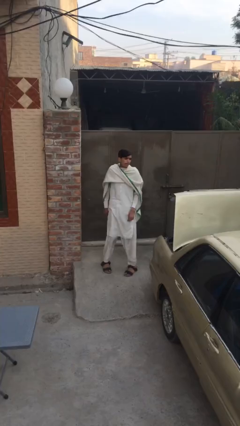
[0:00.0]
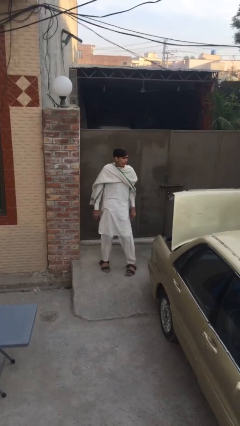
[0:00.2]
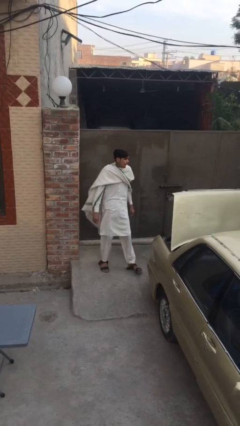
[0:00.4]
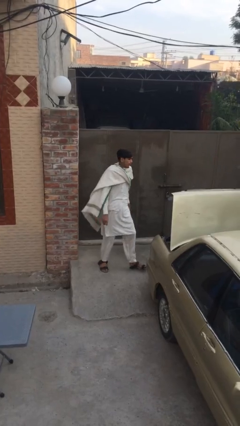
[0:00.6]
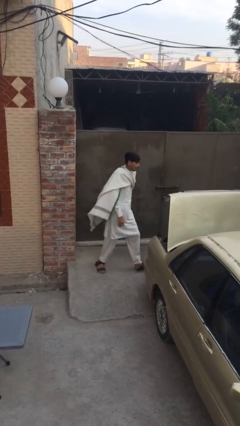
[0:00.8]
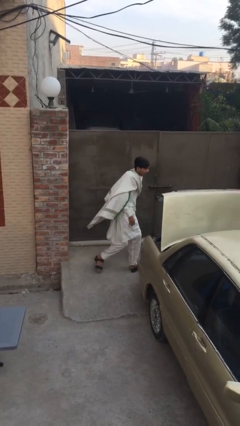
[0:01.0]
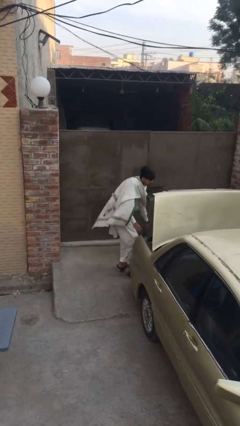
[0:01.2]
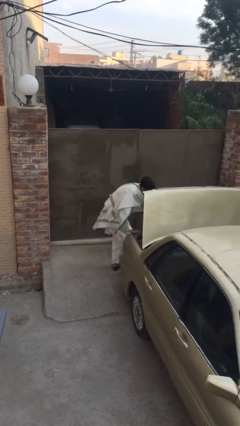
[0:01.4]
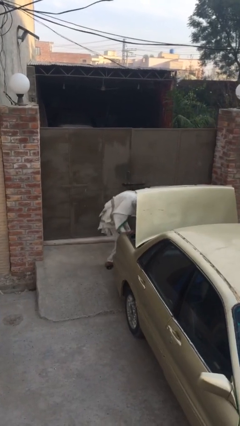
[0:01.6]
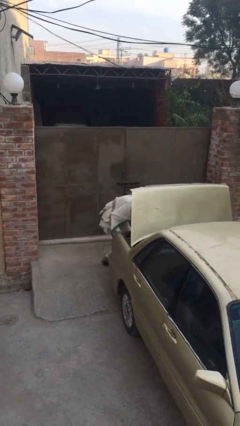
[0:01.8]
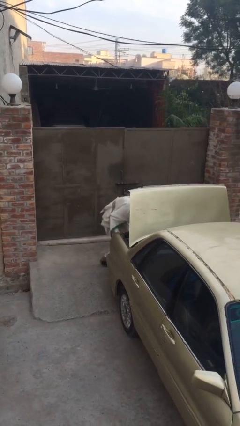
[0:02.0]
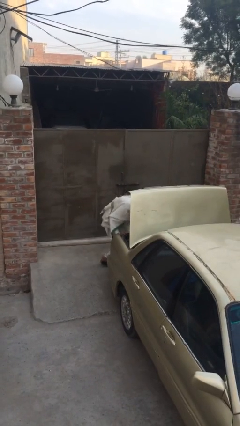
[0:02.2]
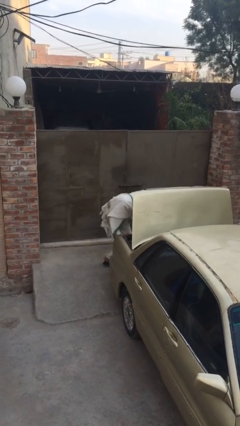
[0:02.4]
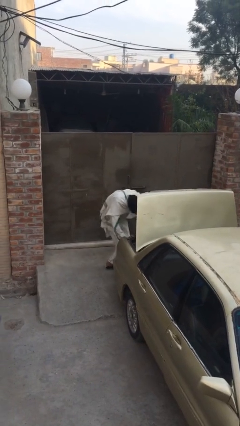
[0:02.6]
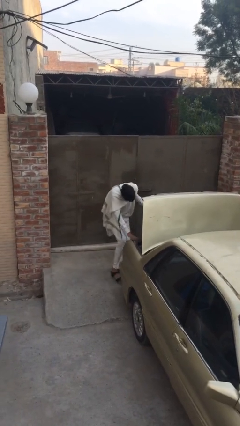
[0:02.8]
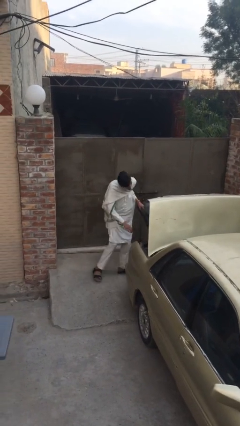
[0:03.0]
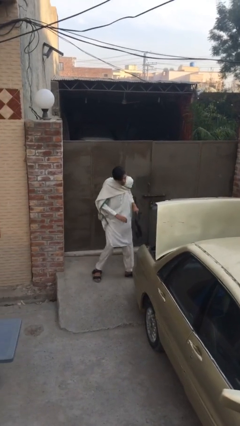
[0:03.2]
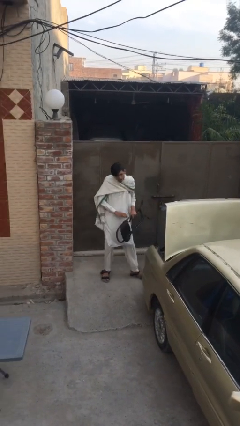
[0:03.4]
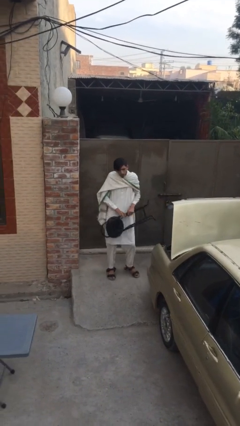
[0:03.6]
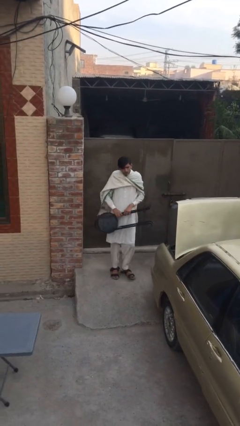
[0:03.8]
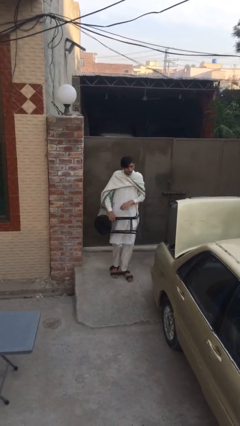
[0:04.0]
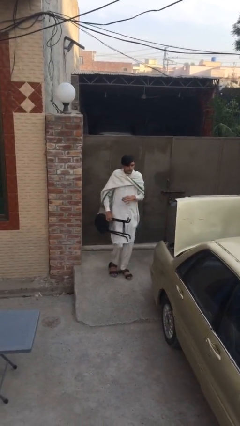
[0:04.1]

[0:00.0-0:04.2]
person unloads car

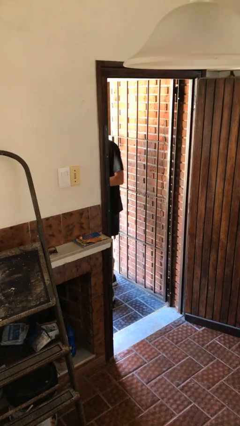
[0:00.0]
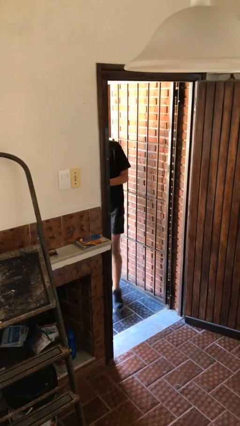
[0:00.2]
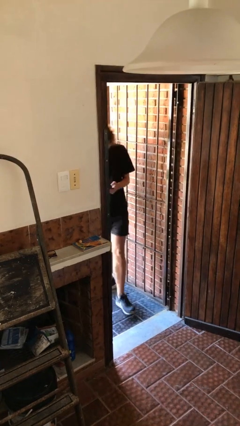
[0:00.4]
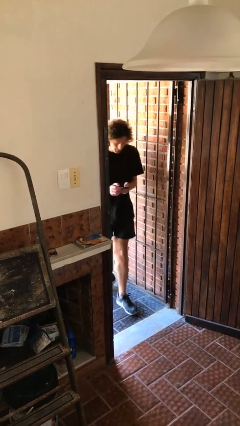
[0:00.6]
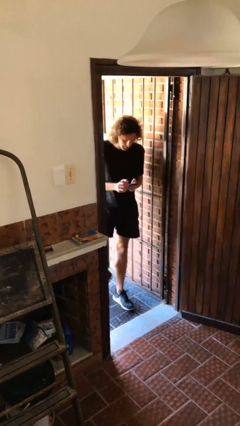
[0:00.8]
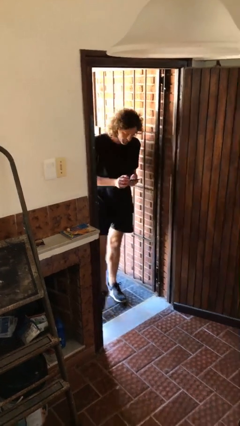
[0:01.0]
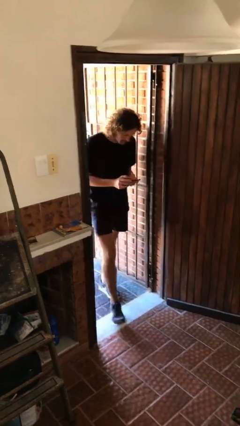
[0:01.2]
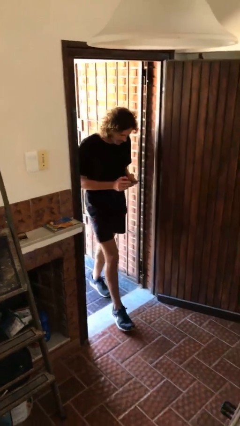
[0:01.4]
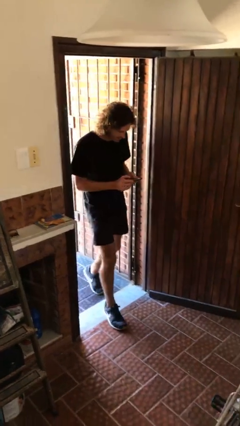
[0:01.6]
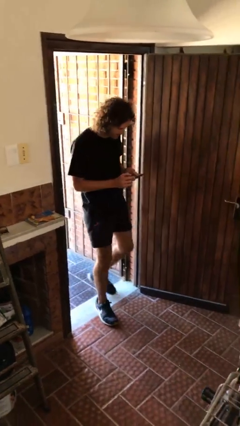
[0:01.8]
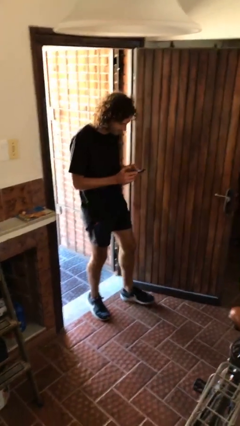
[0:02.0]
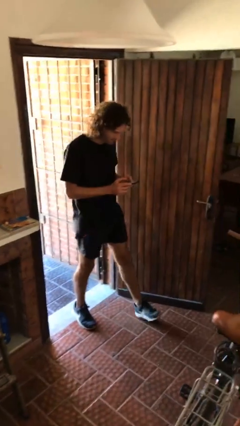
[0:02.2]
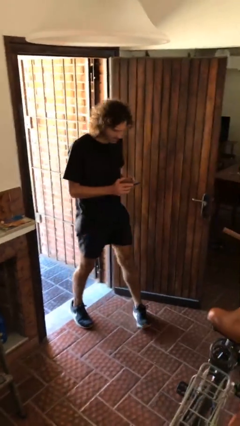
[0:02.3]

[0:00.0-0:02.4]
person enters scene through structure

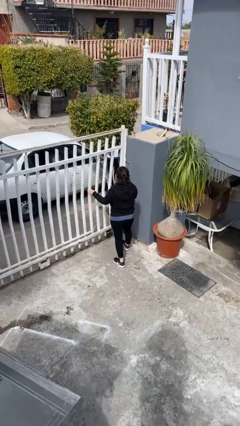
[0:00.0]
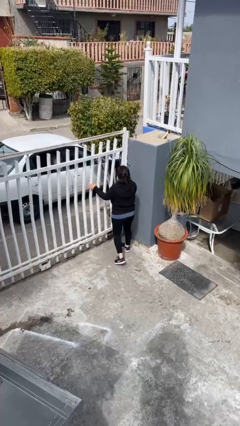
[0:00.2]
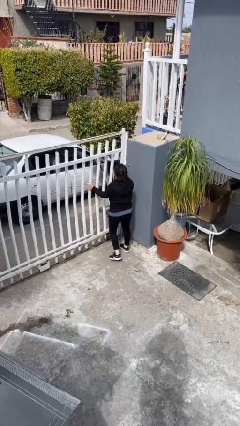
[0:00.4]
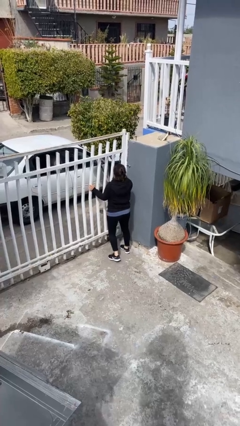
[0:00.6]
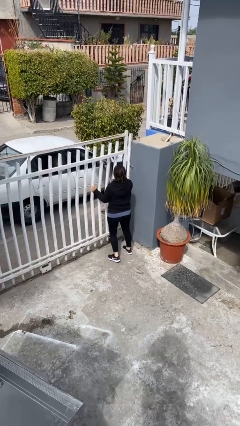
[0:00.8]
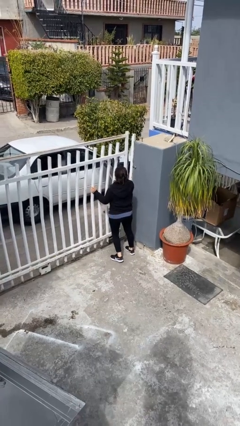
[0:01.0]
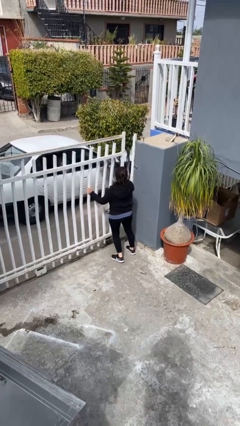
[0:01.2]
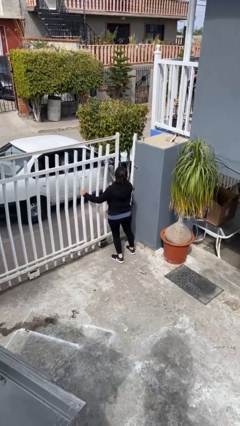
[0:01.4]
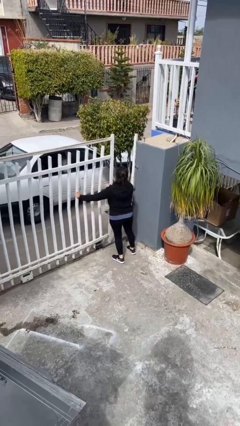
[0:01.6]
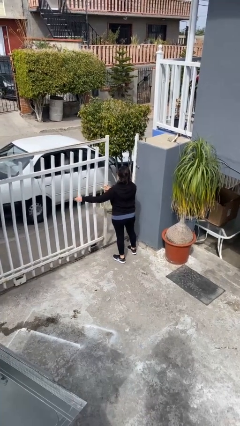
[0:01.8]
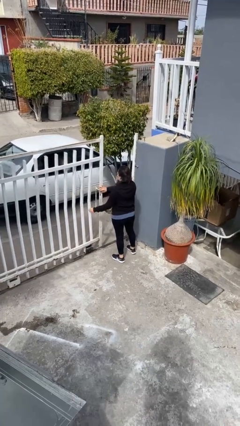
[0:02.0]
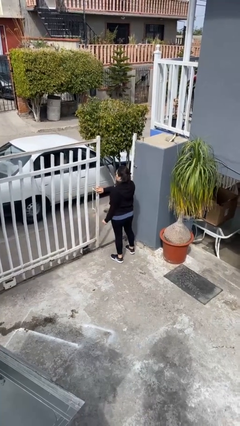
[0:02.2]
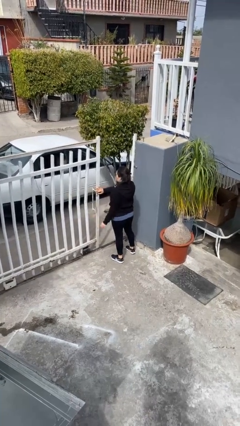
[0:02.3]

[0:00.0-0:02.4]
person opens facility door

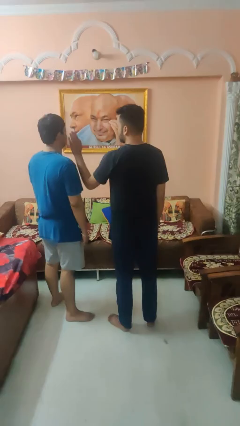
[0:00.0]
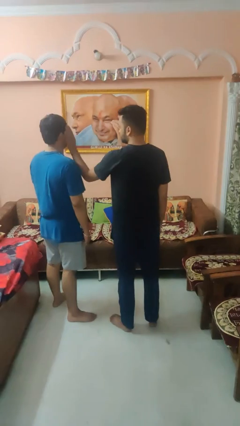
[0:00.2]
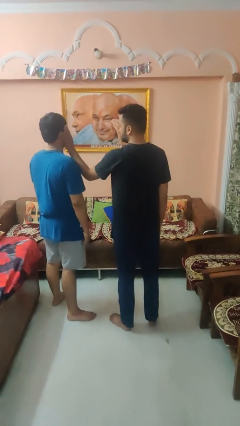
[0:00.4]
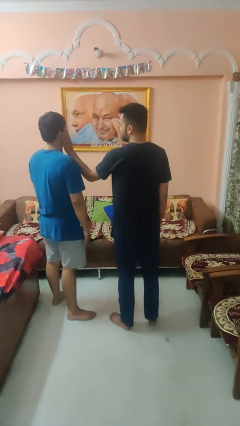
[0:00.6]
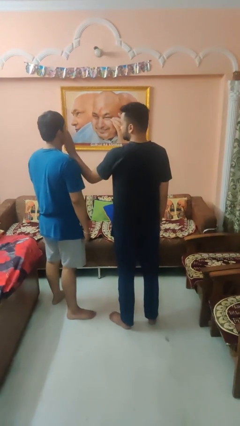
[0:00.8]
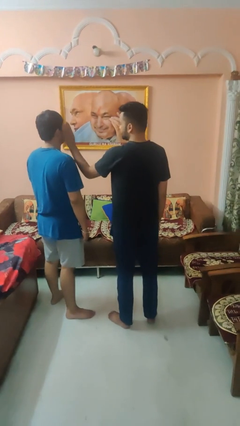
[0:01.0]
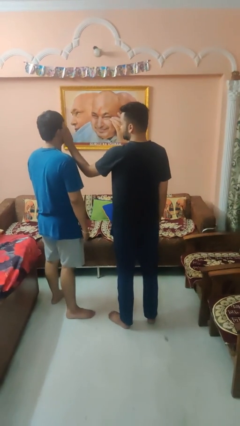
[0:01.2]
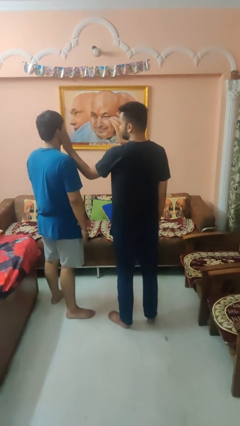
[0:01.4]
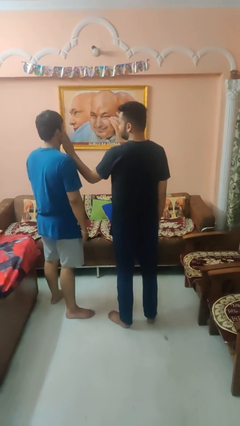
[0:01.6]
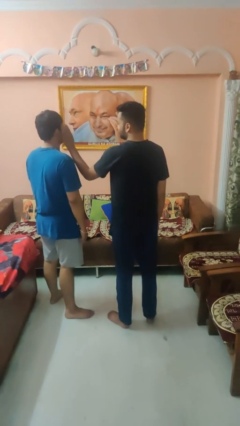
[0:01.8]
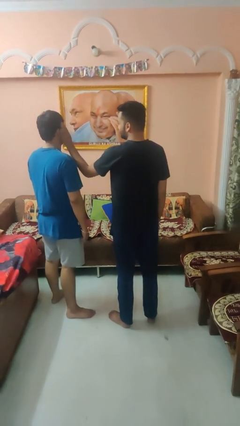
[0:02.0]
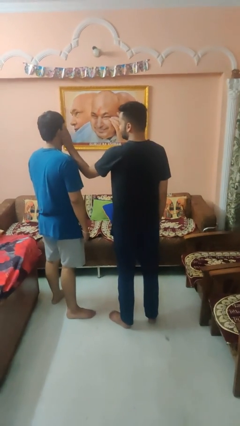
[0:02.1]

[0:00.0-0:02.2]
person touches face of person

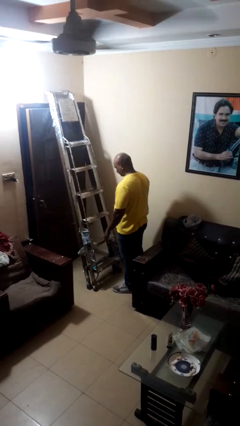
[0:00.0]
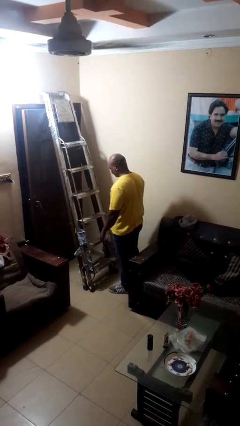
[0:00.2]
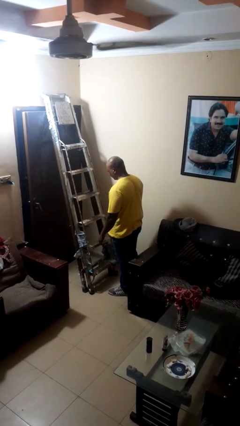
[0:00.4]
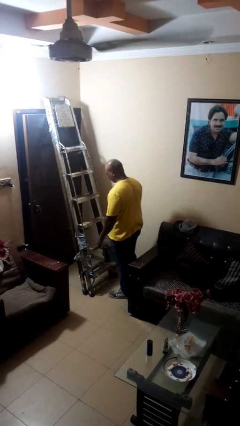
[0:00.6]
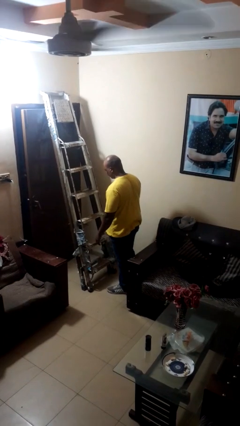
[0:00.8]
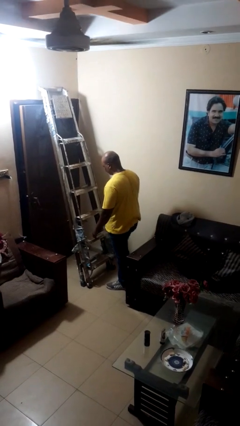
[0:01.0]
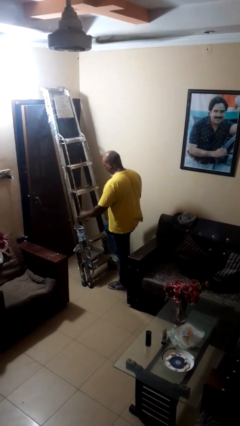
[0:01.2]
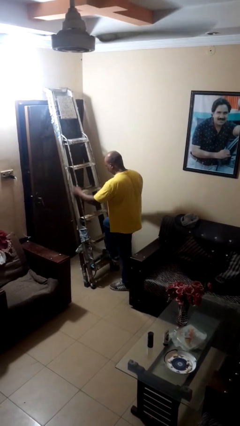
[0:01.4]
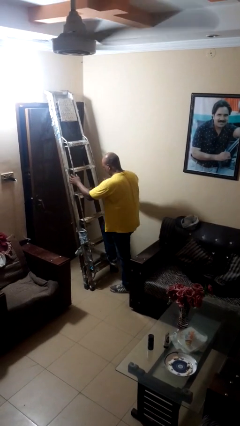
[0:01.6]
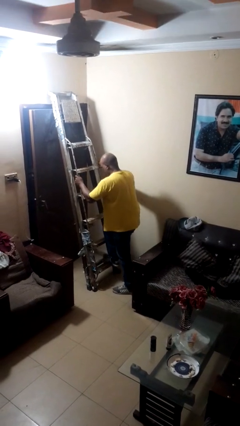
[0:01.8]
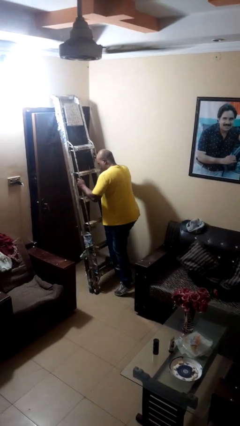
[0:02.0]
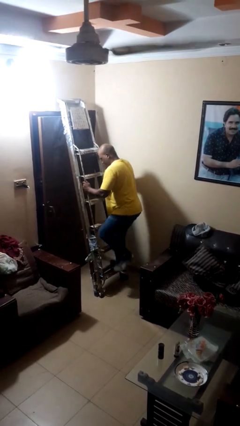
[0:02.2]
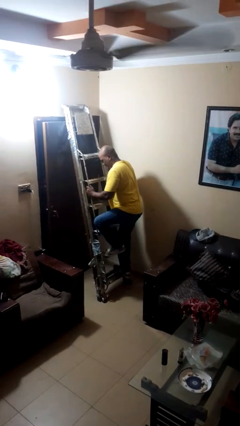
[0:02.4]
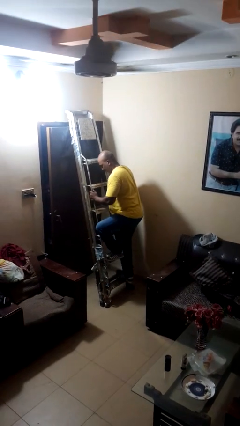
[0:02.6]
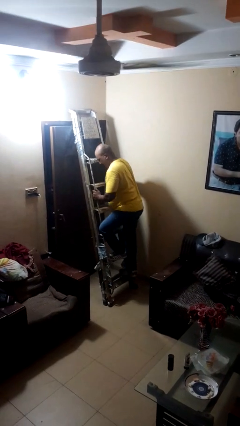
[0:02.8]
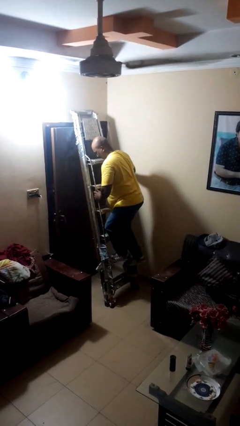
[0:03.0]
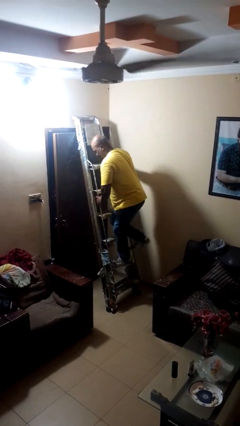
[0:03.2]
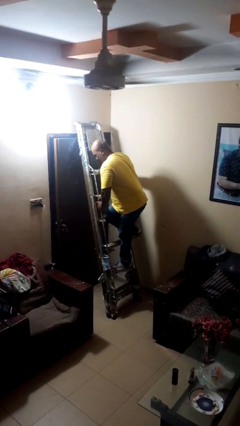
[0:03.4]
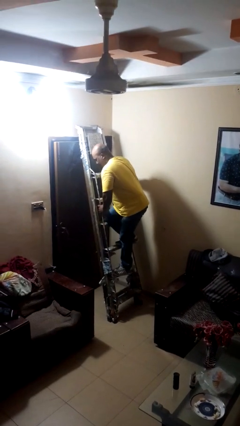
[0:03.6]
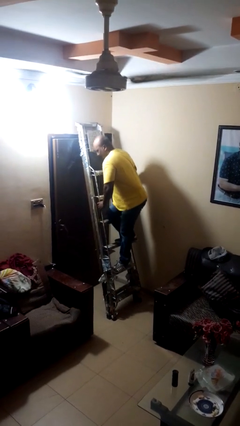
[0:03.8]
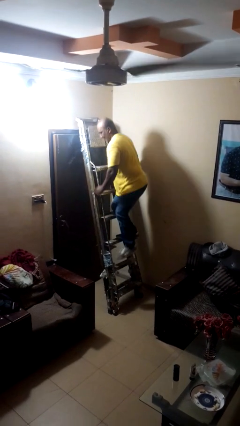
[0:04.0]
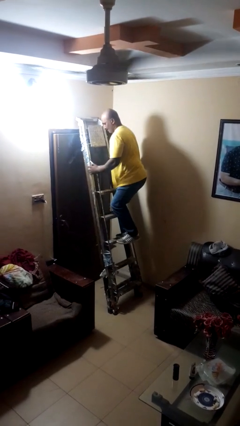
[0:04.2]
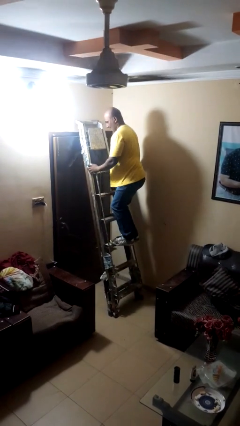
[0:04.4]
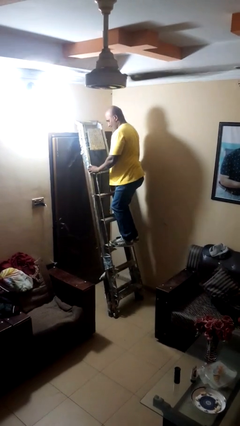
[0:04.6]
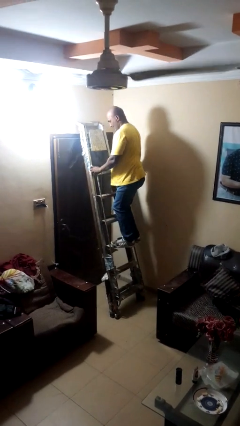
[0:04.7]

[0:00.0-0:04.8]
person climbs up stairs

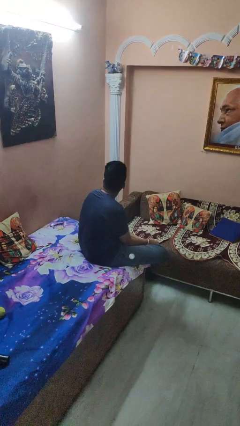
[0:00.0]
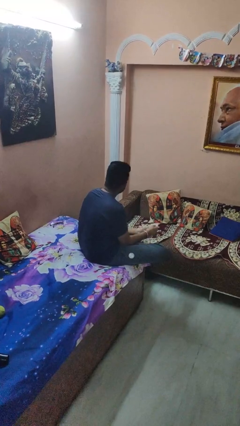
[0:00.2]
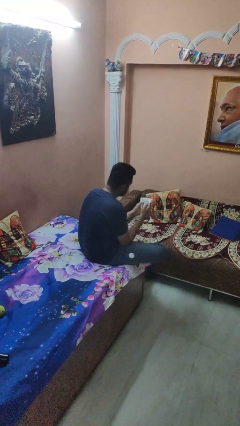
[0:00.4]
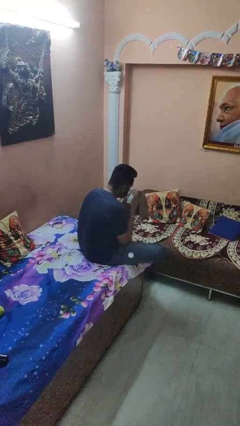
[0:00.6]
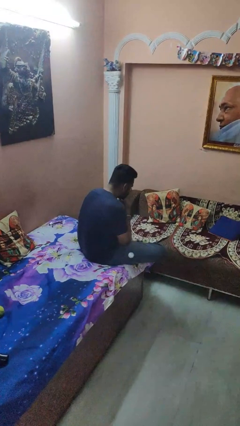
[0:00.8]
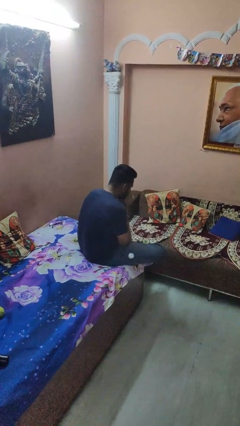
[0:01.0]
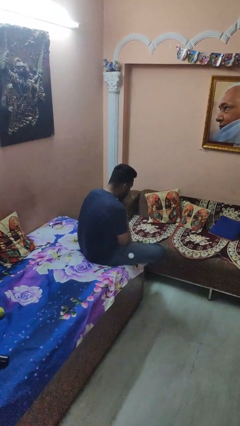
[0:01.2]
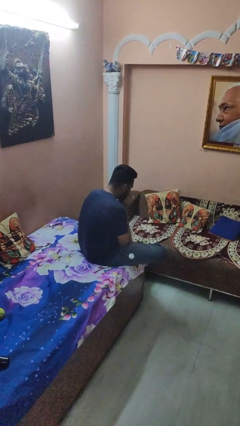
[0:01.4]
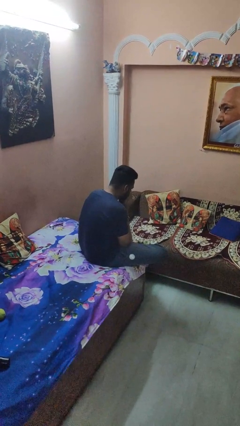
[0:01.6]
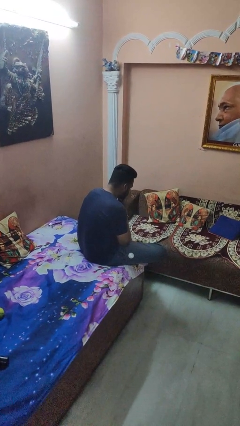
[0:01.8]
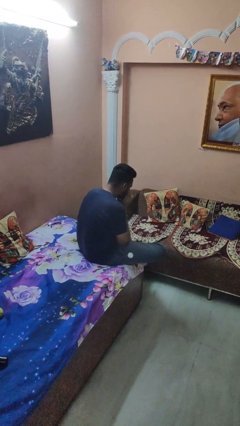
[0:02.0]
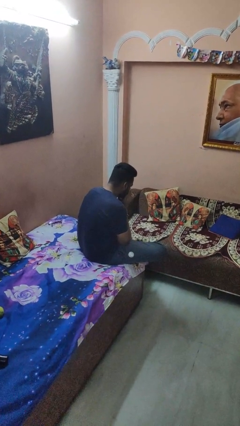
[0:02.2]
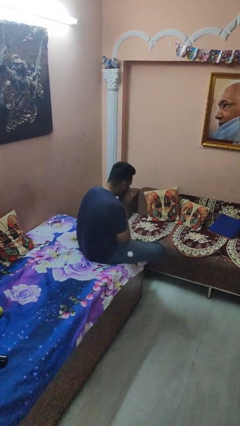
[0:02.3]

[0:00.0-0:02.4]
person blows nose
